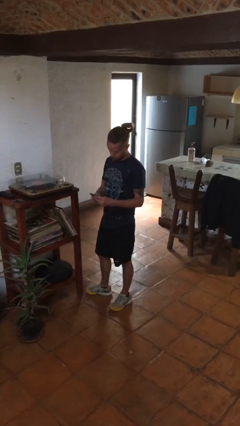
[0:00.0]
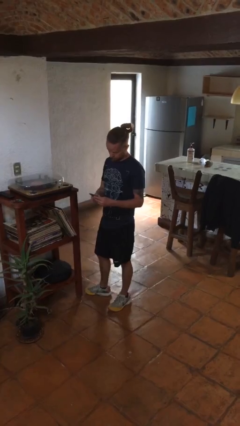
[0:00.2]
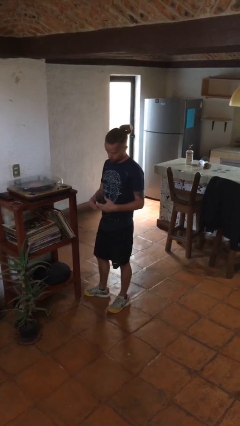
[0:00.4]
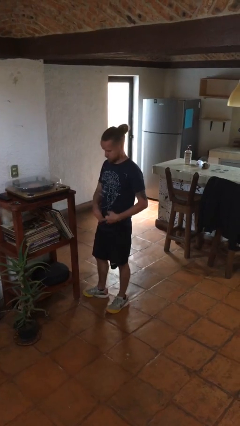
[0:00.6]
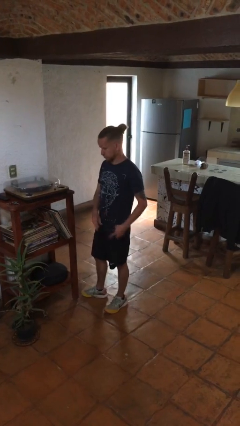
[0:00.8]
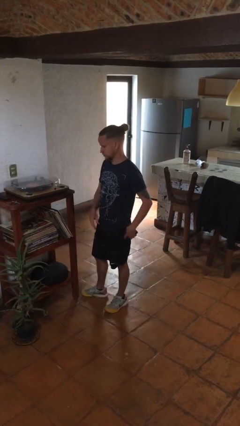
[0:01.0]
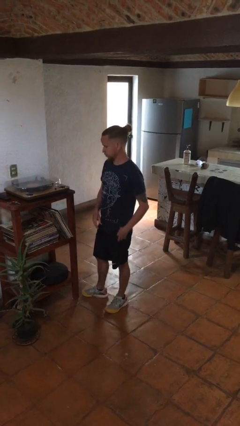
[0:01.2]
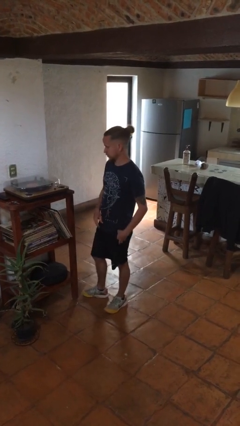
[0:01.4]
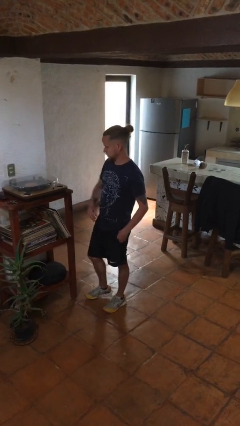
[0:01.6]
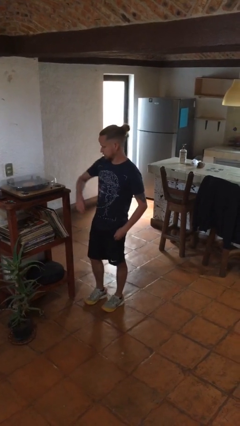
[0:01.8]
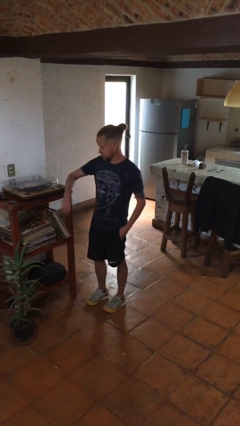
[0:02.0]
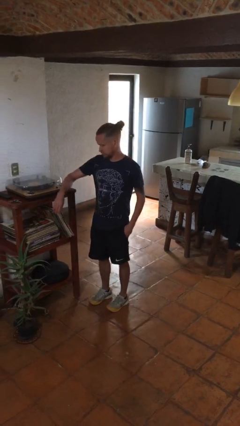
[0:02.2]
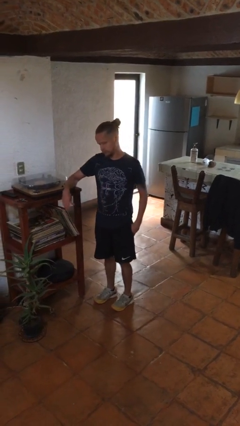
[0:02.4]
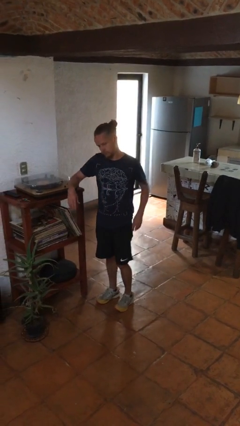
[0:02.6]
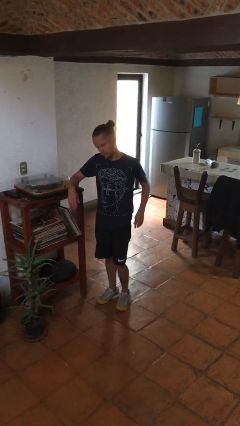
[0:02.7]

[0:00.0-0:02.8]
person puts phone into pocket

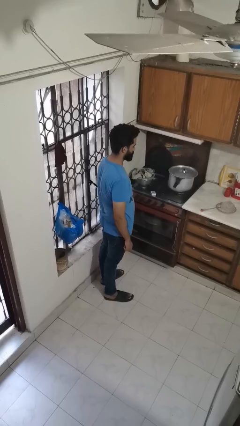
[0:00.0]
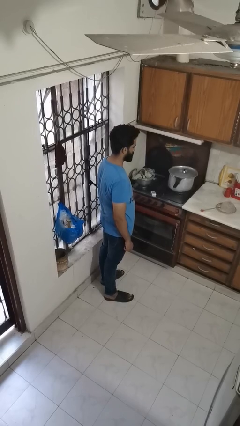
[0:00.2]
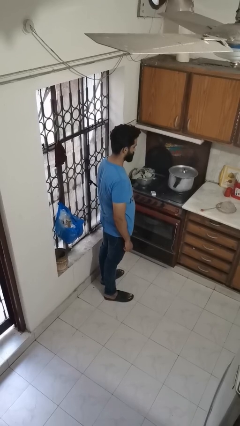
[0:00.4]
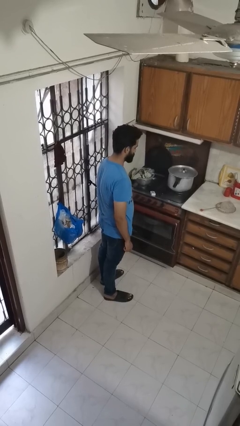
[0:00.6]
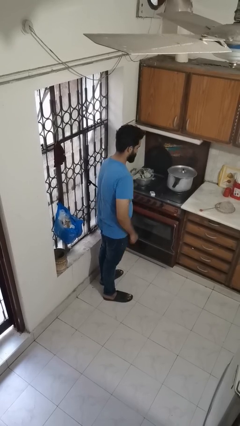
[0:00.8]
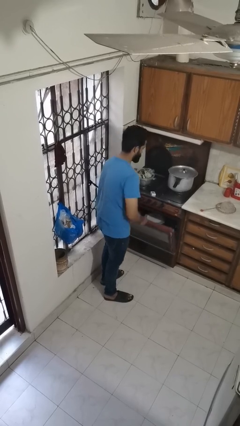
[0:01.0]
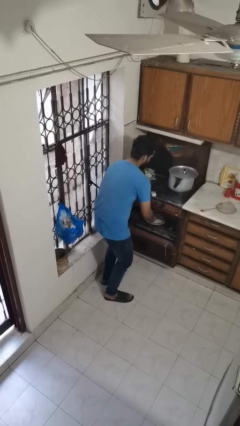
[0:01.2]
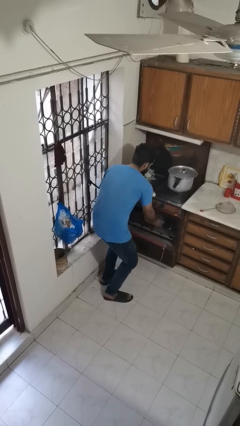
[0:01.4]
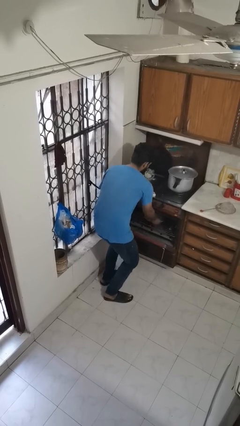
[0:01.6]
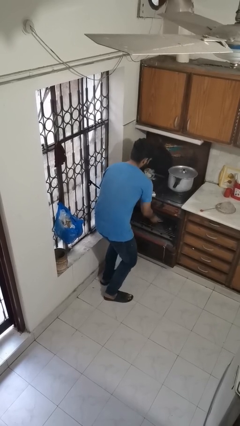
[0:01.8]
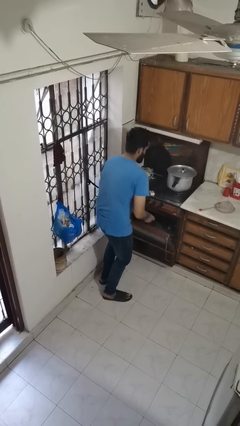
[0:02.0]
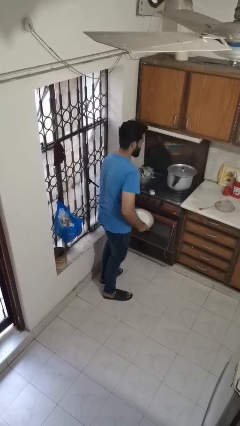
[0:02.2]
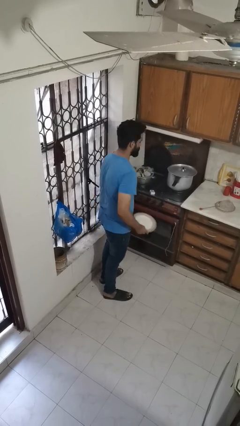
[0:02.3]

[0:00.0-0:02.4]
person takes object from oven

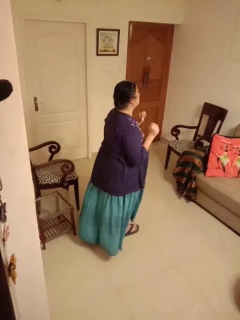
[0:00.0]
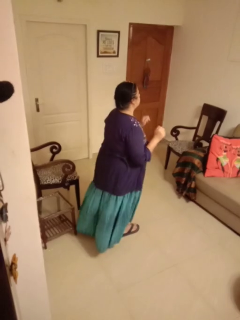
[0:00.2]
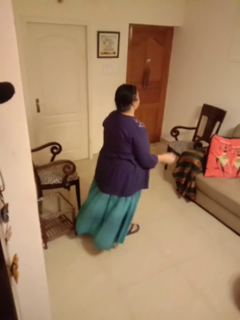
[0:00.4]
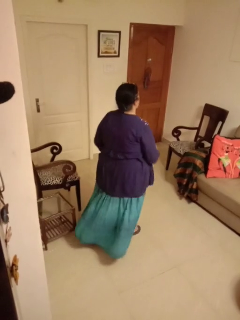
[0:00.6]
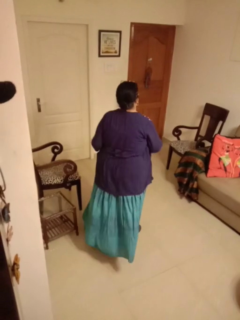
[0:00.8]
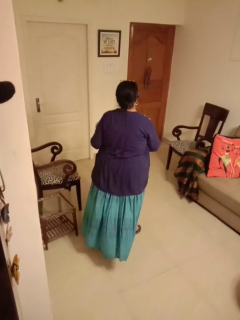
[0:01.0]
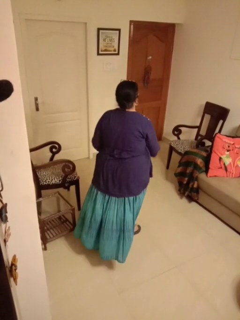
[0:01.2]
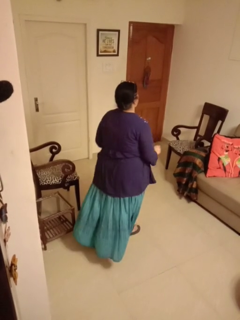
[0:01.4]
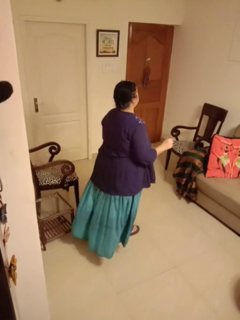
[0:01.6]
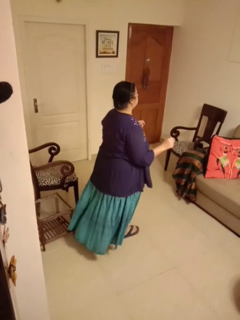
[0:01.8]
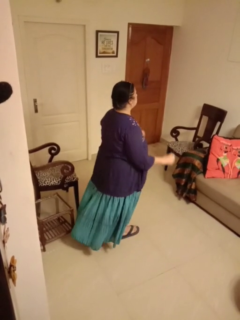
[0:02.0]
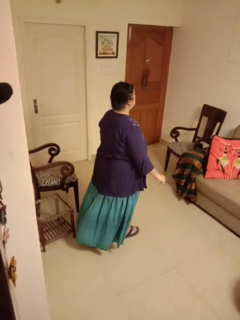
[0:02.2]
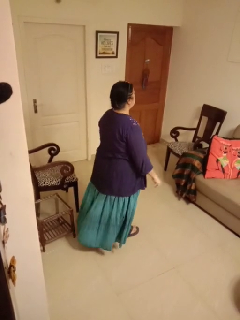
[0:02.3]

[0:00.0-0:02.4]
person dances in place

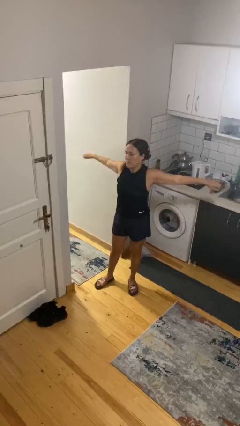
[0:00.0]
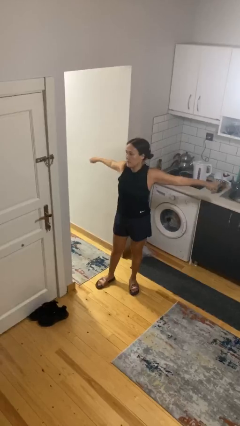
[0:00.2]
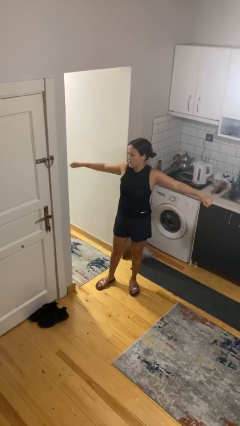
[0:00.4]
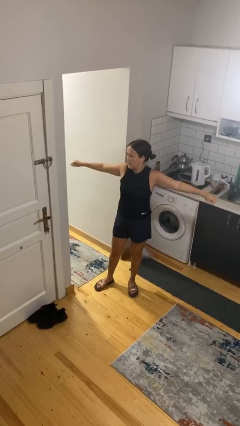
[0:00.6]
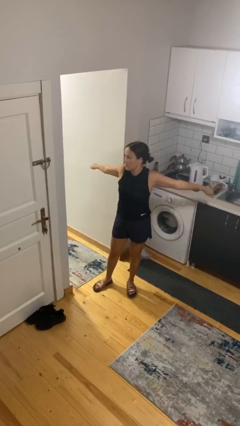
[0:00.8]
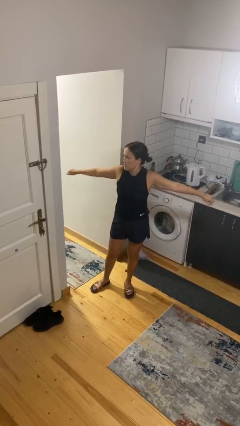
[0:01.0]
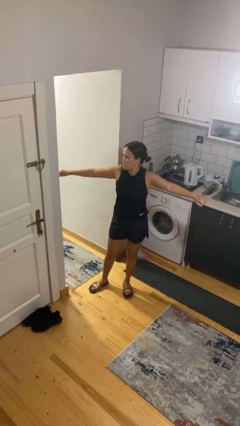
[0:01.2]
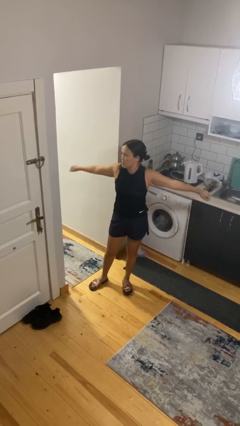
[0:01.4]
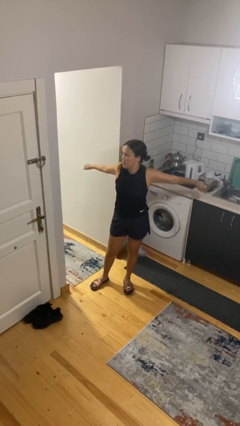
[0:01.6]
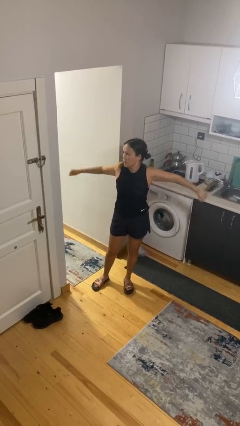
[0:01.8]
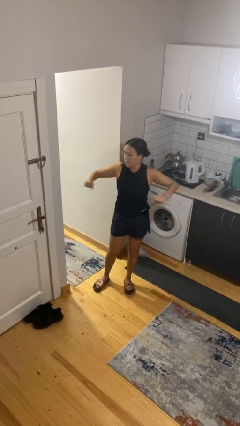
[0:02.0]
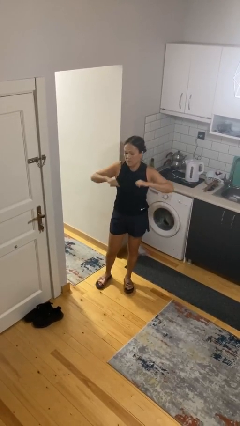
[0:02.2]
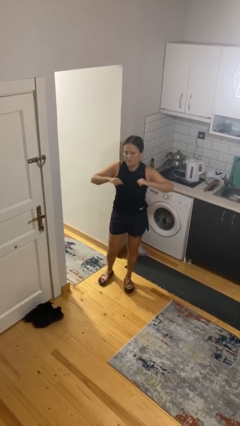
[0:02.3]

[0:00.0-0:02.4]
person stretches arms to side

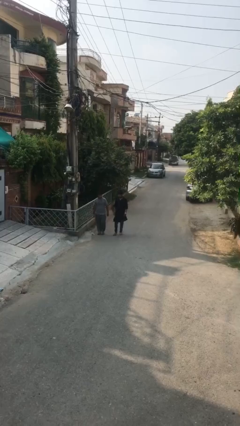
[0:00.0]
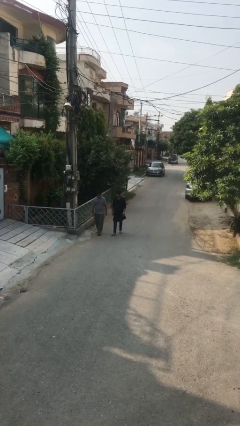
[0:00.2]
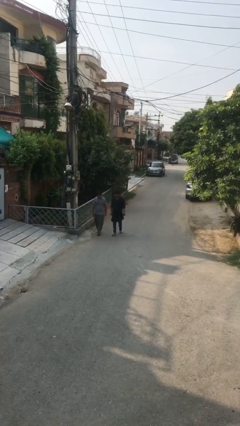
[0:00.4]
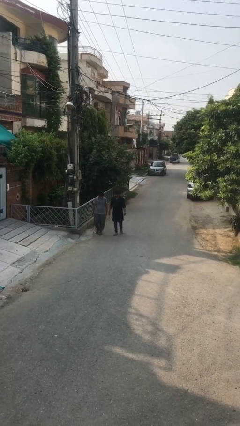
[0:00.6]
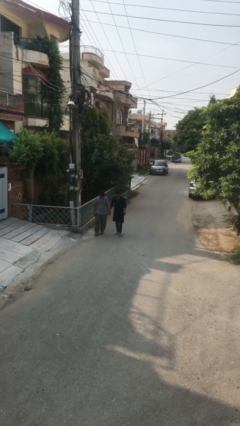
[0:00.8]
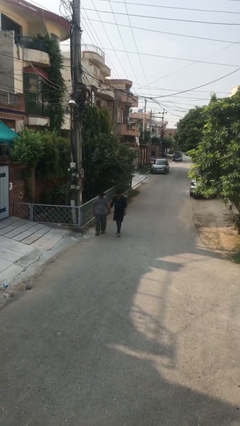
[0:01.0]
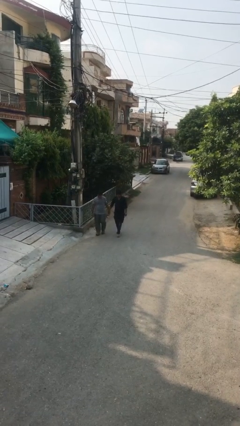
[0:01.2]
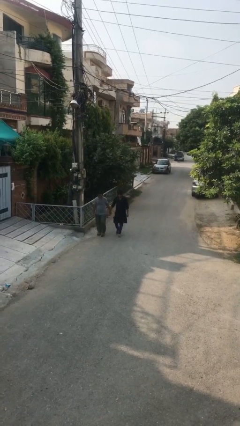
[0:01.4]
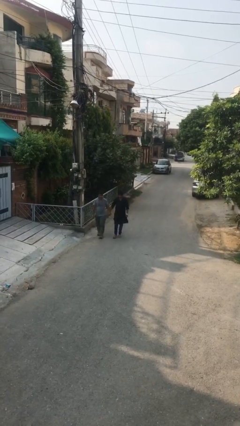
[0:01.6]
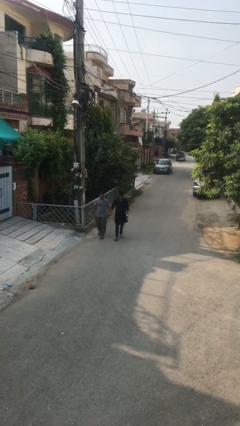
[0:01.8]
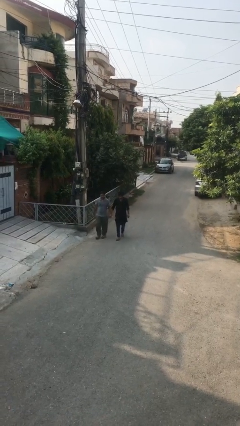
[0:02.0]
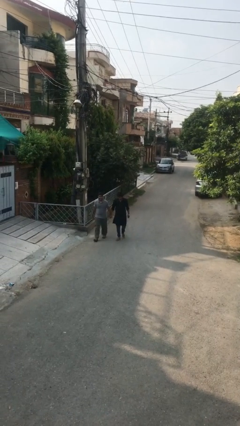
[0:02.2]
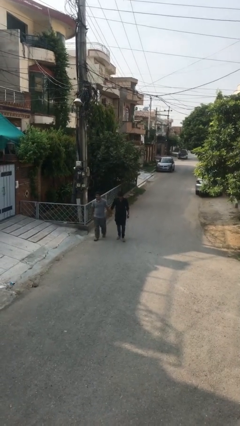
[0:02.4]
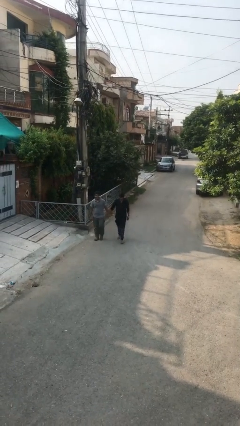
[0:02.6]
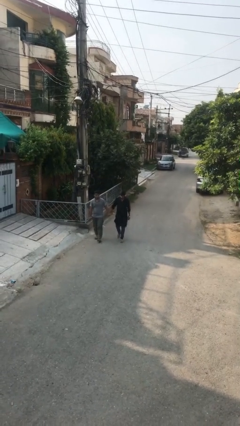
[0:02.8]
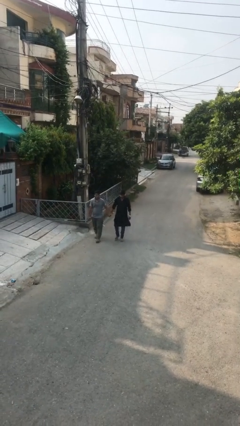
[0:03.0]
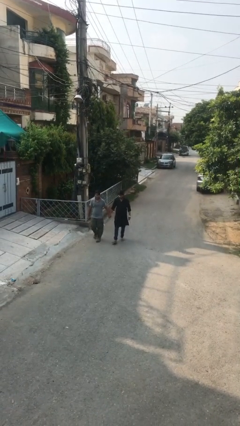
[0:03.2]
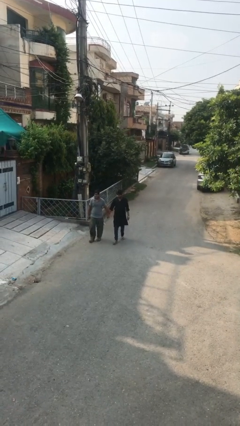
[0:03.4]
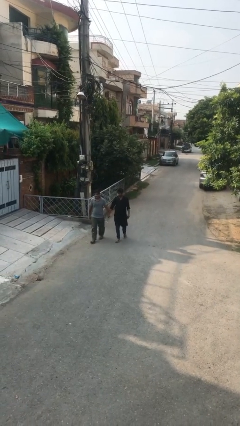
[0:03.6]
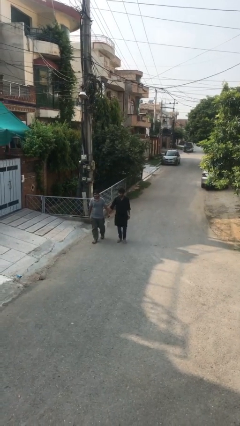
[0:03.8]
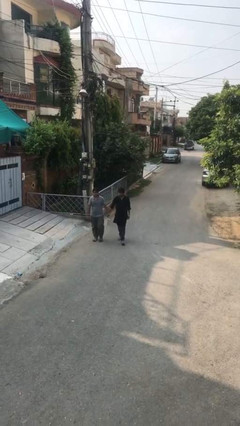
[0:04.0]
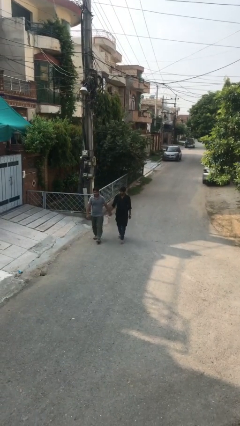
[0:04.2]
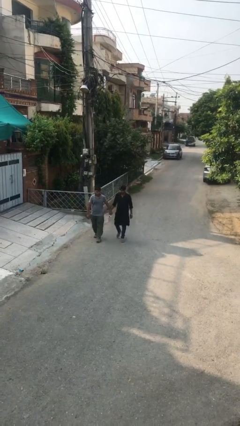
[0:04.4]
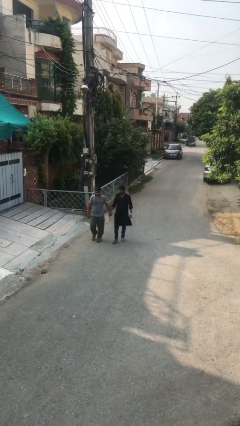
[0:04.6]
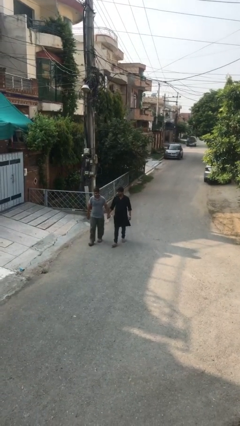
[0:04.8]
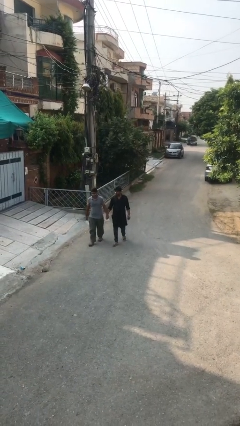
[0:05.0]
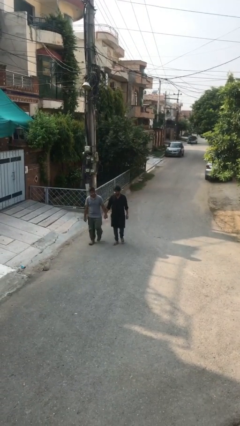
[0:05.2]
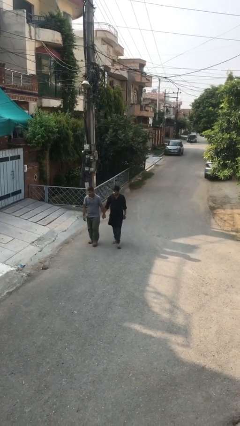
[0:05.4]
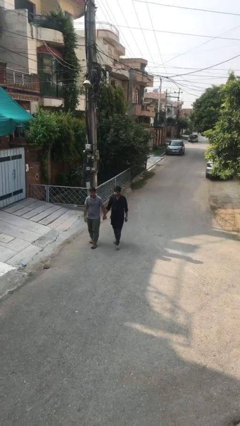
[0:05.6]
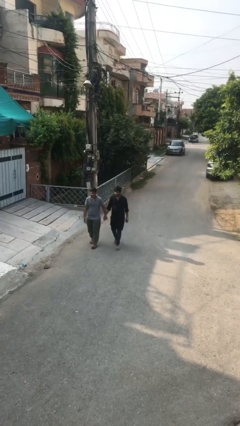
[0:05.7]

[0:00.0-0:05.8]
person holds hand

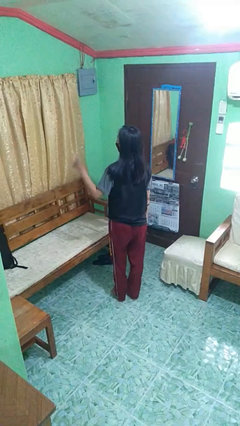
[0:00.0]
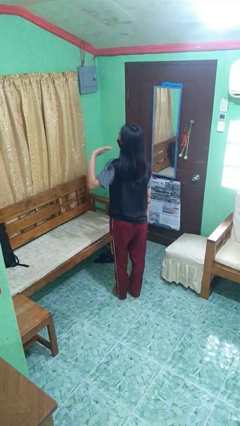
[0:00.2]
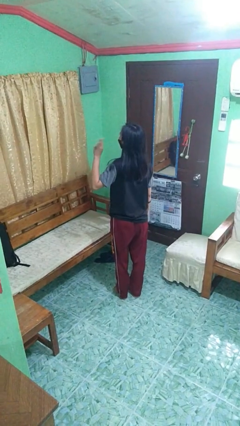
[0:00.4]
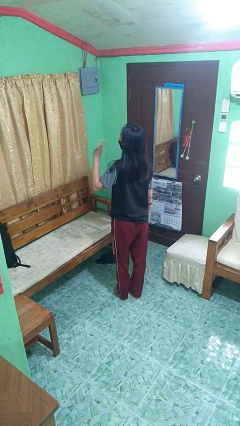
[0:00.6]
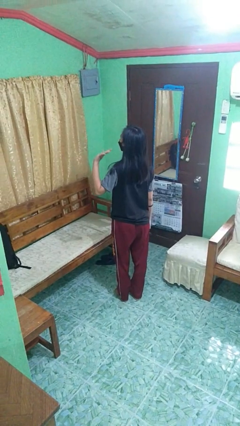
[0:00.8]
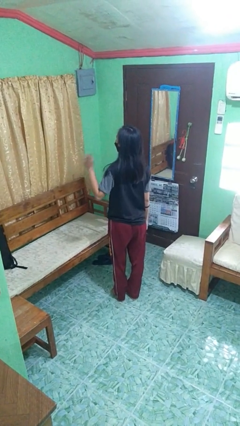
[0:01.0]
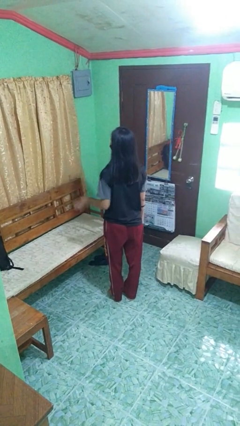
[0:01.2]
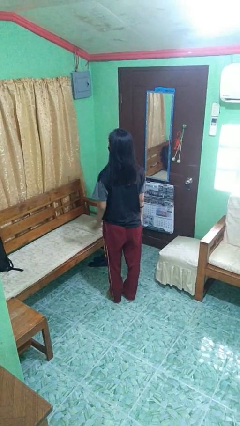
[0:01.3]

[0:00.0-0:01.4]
person waves at person

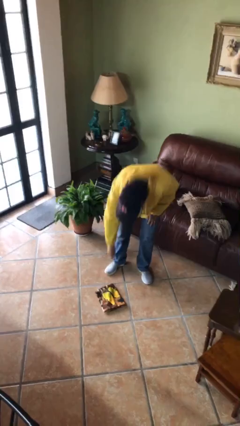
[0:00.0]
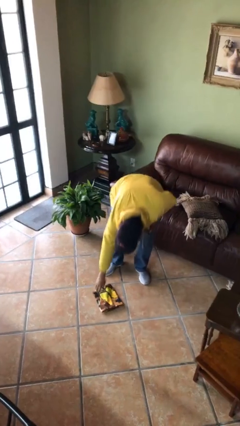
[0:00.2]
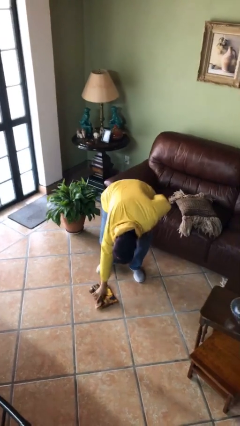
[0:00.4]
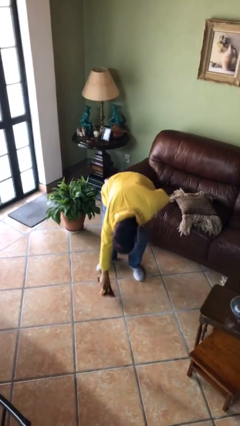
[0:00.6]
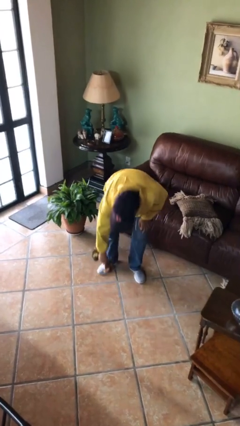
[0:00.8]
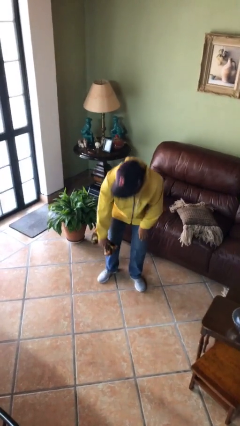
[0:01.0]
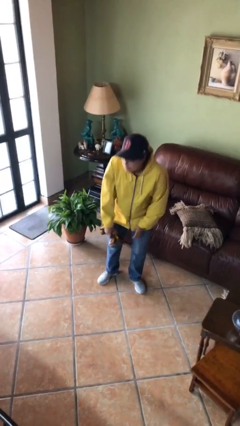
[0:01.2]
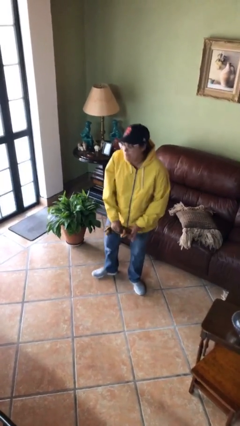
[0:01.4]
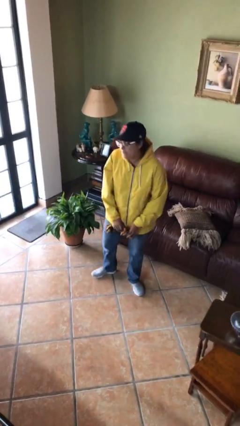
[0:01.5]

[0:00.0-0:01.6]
person picks up object from floor
